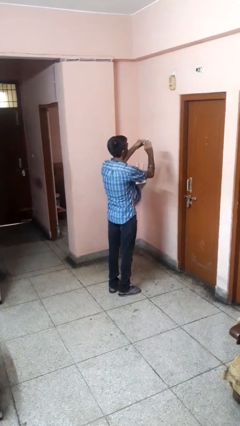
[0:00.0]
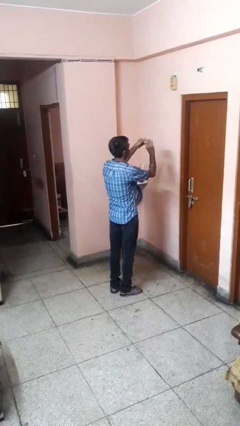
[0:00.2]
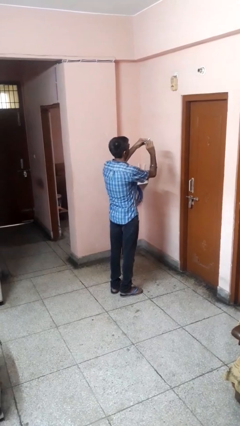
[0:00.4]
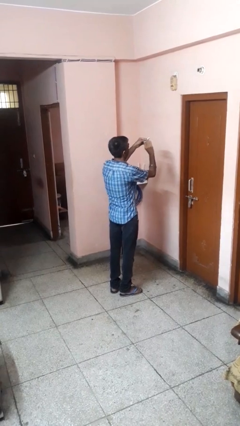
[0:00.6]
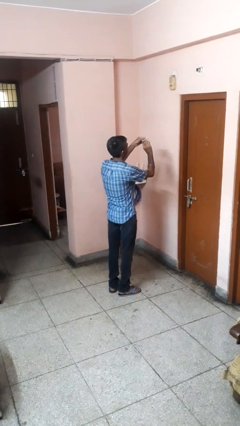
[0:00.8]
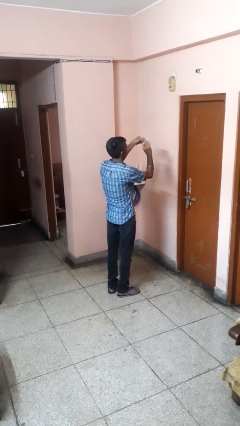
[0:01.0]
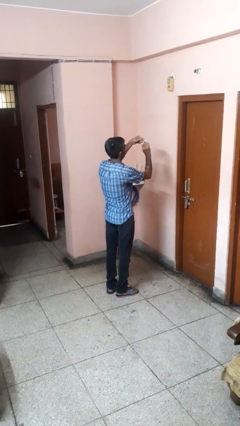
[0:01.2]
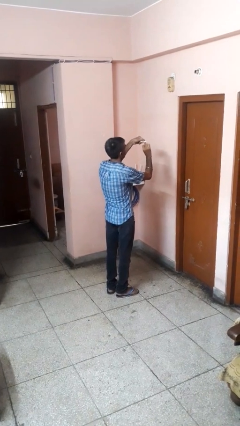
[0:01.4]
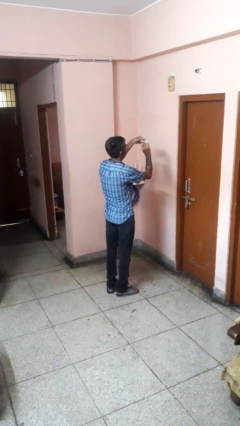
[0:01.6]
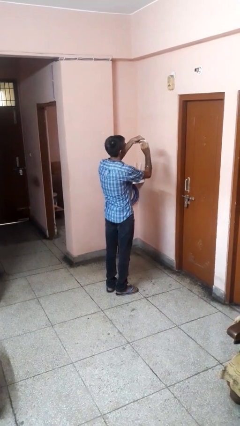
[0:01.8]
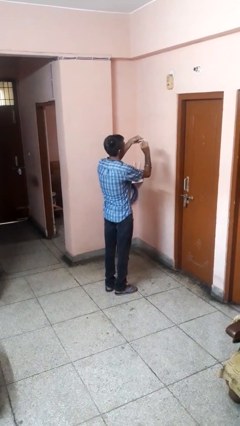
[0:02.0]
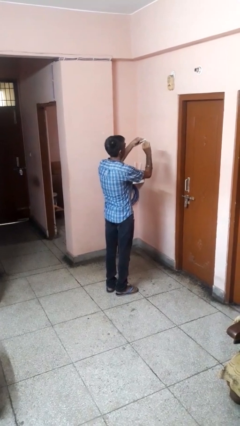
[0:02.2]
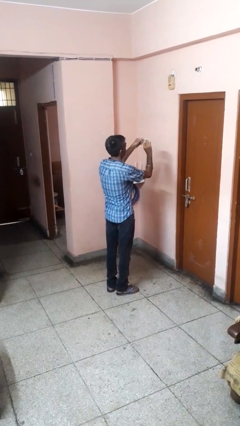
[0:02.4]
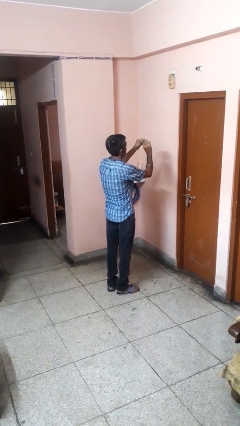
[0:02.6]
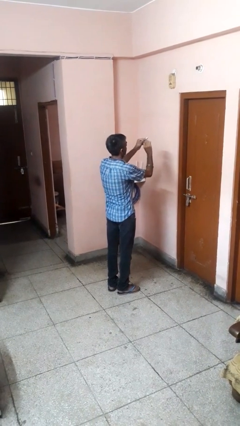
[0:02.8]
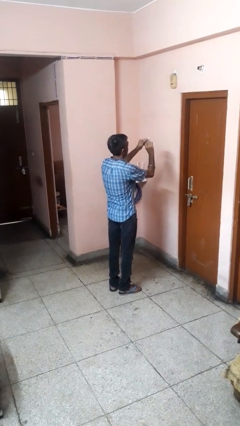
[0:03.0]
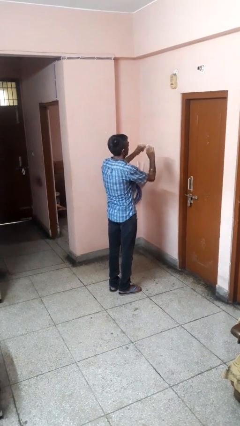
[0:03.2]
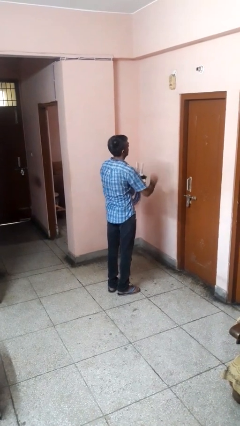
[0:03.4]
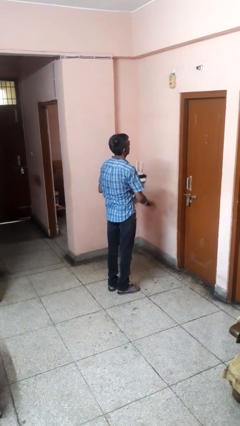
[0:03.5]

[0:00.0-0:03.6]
person files fingernails

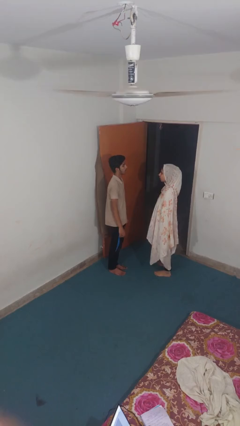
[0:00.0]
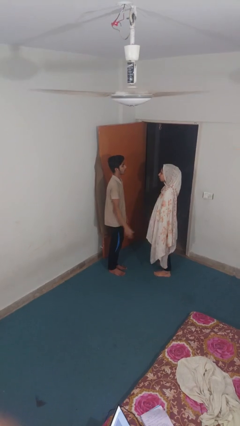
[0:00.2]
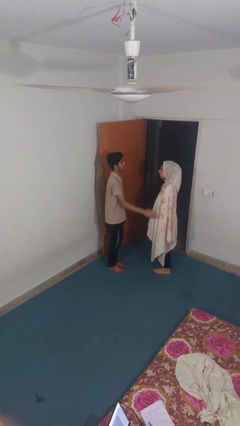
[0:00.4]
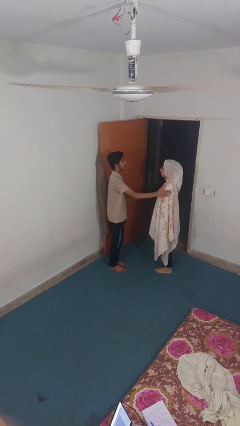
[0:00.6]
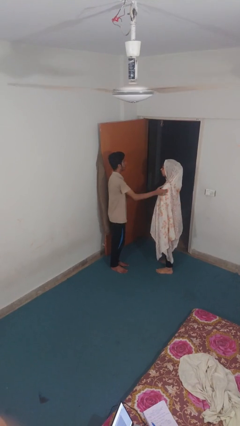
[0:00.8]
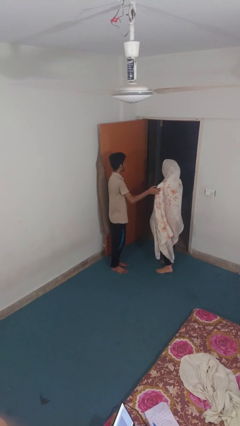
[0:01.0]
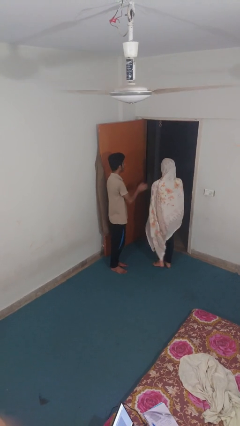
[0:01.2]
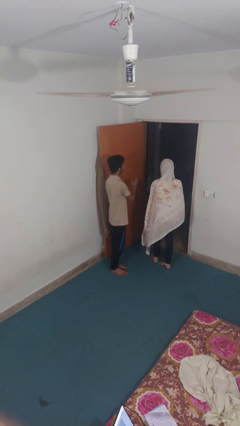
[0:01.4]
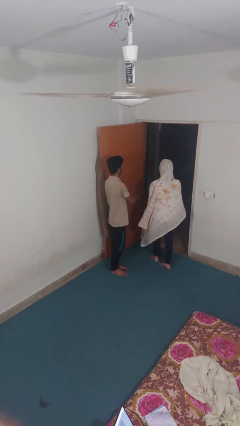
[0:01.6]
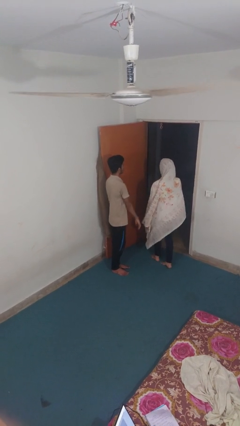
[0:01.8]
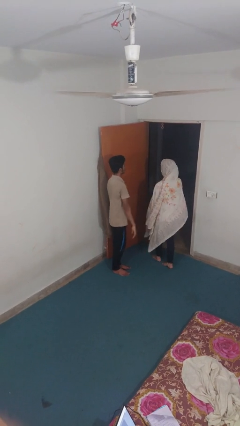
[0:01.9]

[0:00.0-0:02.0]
person shoves person

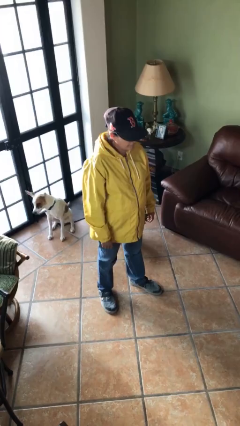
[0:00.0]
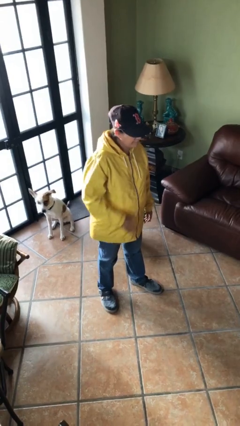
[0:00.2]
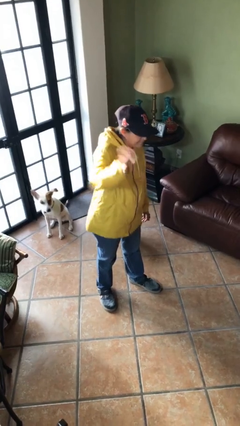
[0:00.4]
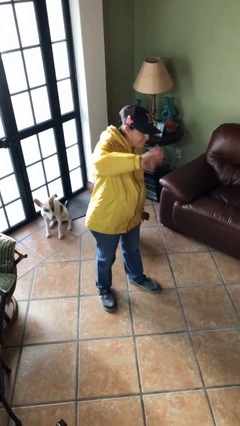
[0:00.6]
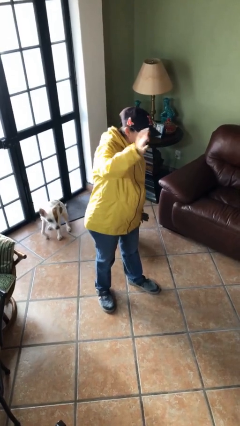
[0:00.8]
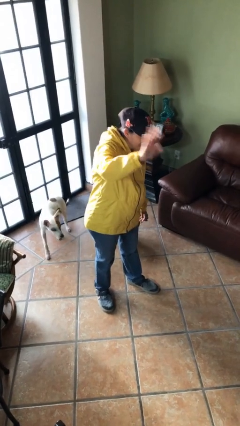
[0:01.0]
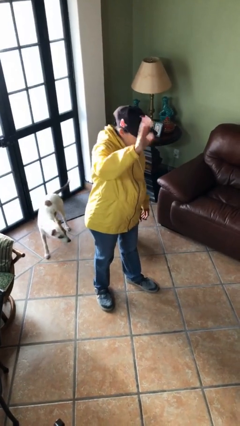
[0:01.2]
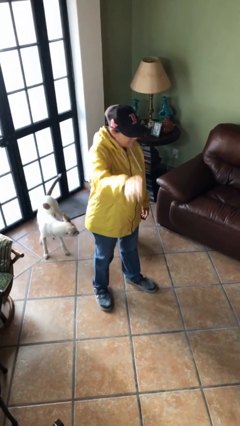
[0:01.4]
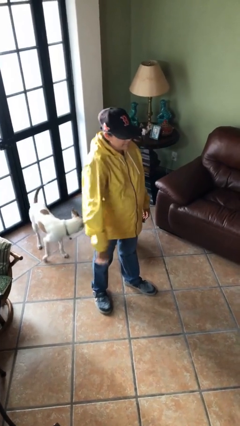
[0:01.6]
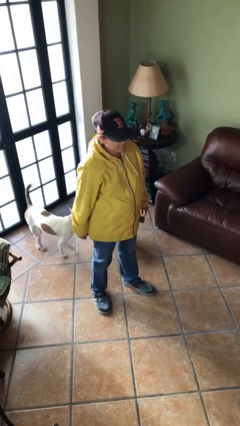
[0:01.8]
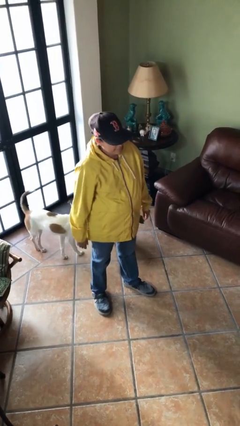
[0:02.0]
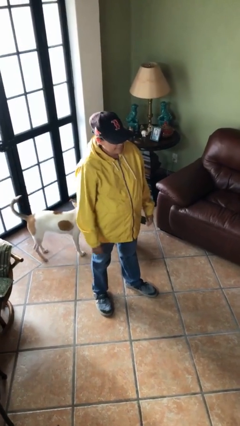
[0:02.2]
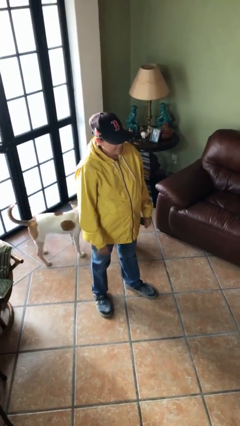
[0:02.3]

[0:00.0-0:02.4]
person waves at person

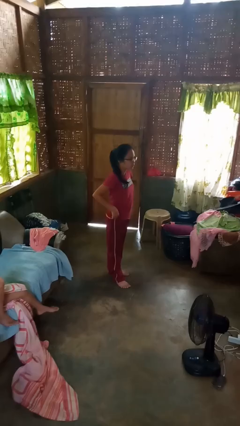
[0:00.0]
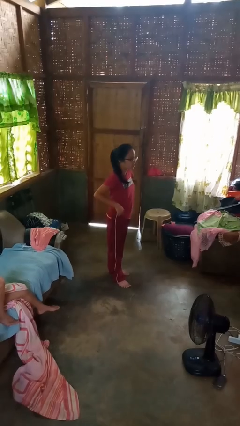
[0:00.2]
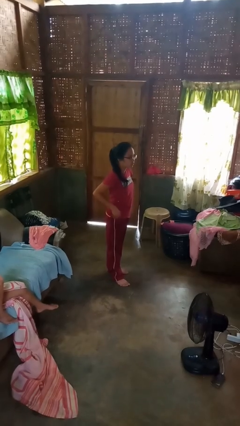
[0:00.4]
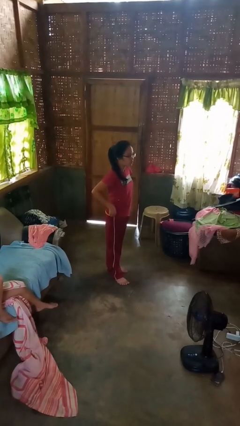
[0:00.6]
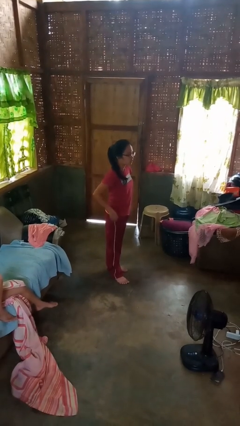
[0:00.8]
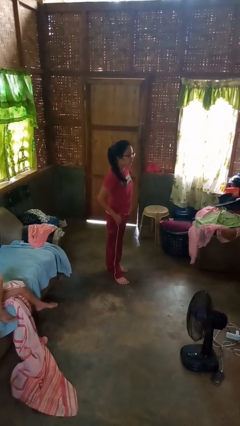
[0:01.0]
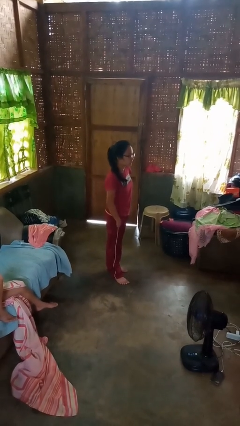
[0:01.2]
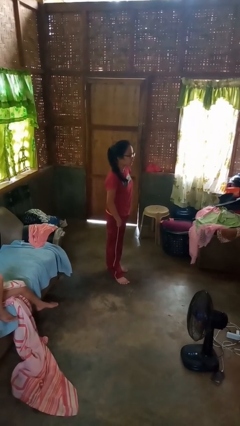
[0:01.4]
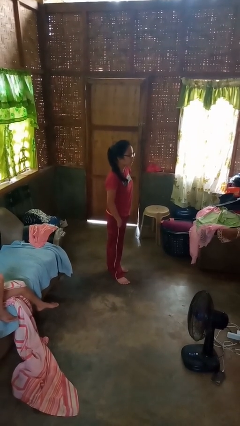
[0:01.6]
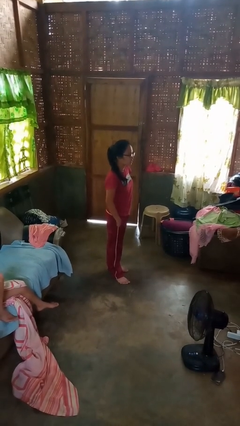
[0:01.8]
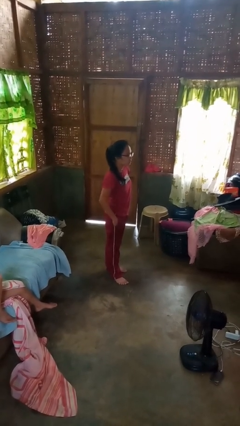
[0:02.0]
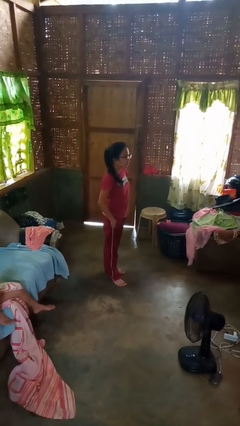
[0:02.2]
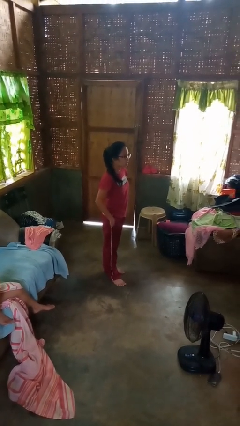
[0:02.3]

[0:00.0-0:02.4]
person puts hands in back pockets

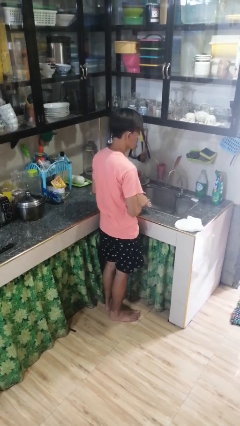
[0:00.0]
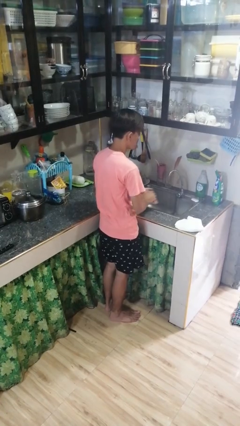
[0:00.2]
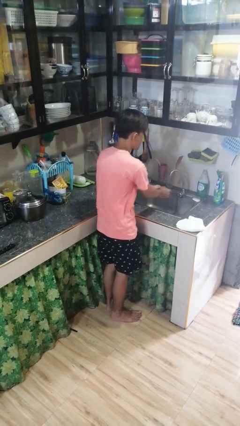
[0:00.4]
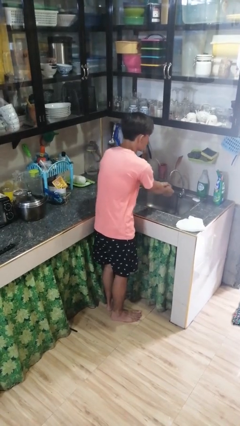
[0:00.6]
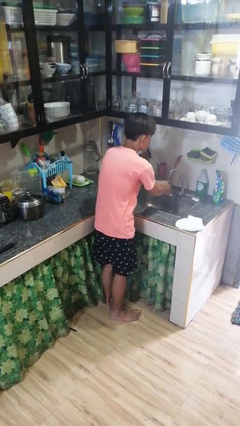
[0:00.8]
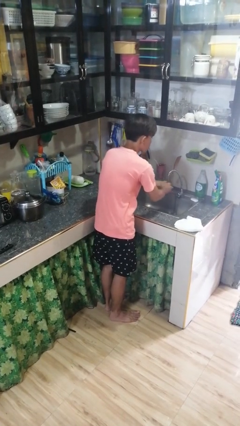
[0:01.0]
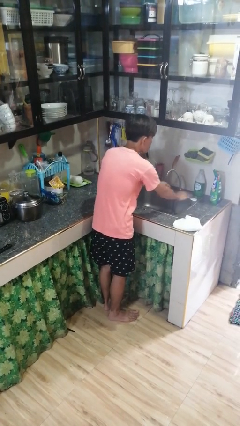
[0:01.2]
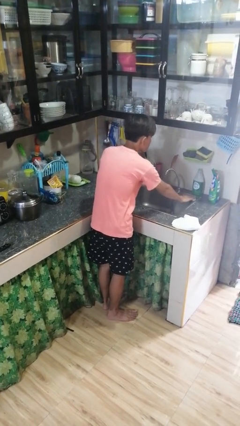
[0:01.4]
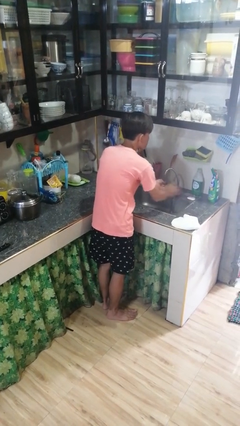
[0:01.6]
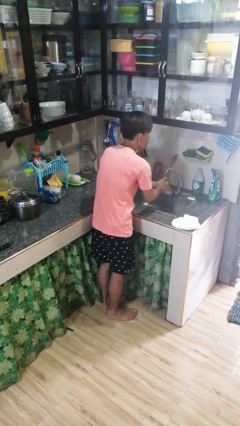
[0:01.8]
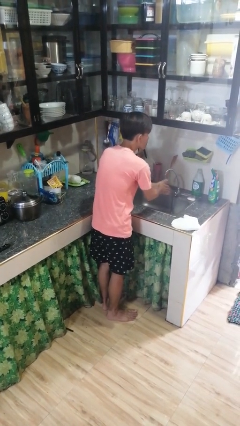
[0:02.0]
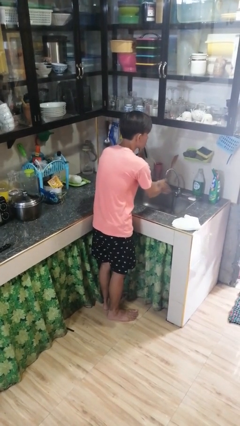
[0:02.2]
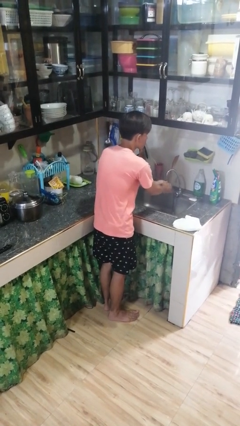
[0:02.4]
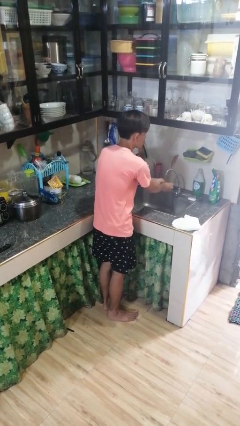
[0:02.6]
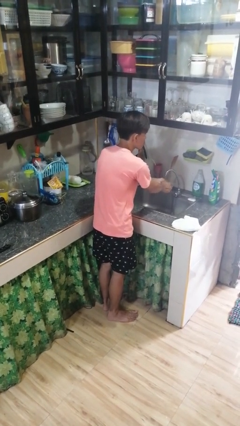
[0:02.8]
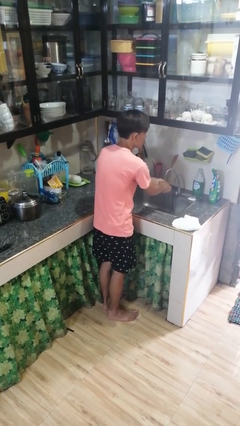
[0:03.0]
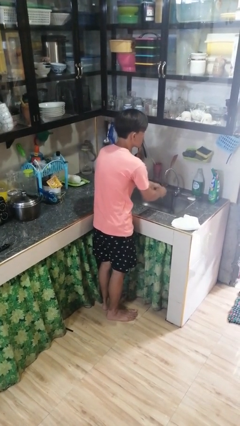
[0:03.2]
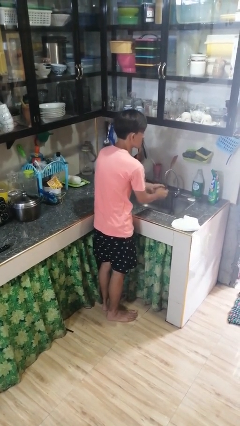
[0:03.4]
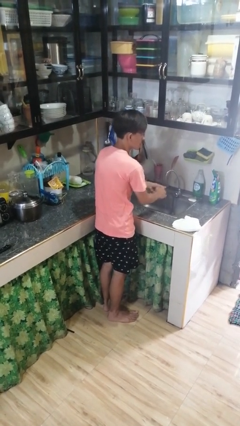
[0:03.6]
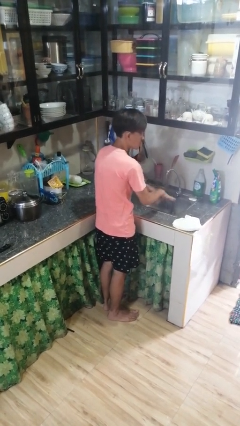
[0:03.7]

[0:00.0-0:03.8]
person washes hands

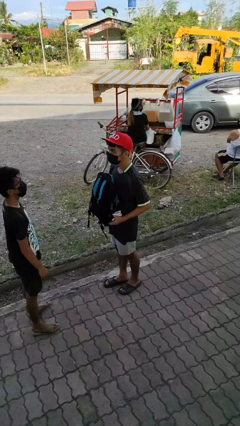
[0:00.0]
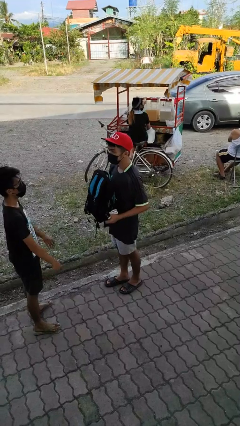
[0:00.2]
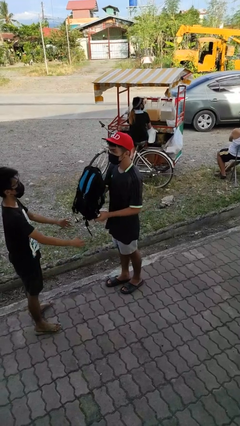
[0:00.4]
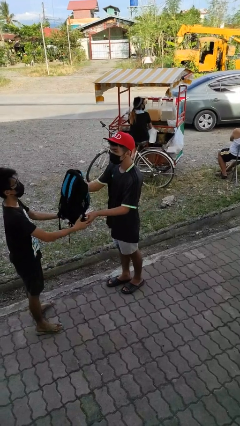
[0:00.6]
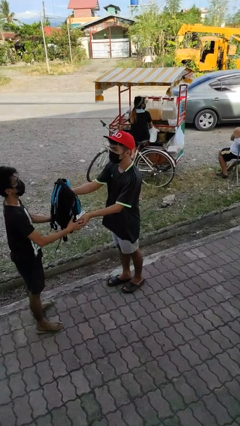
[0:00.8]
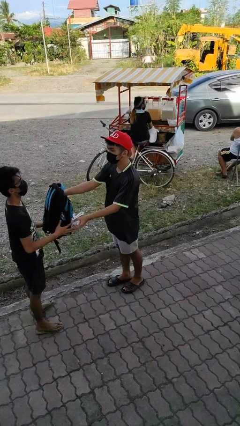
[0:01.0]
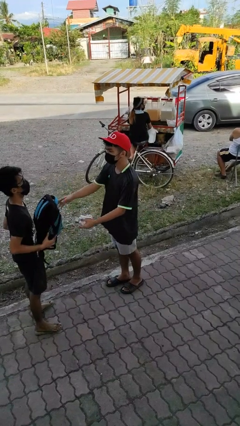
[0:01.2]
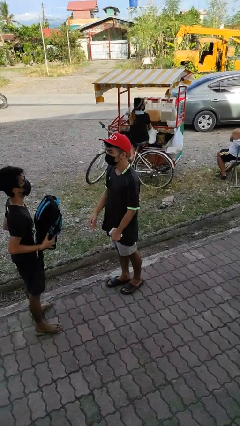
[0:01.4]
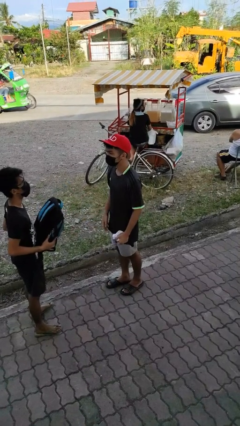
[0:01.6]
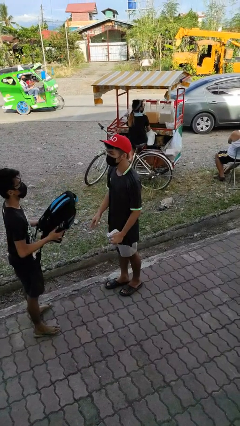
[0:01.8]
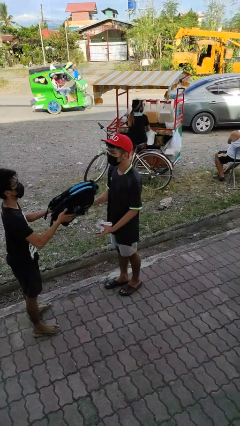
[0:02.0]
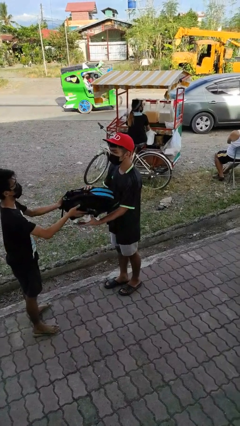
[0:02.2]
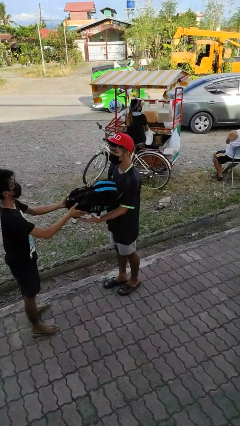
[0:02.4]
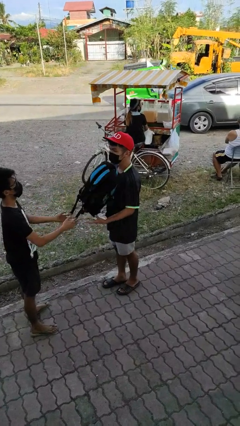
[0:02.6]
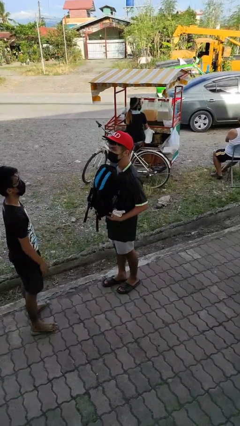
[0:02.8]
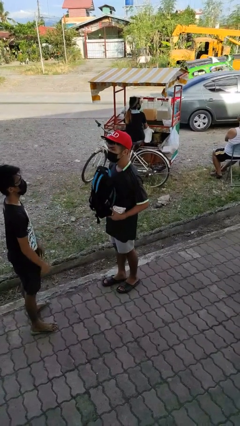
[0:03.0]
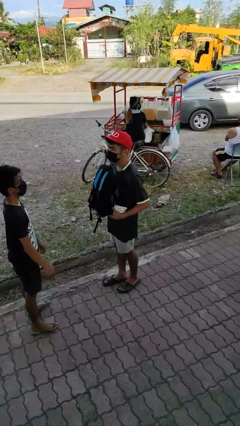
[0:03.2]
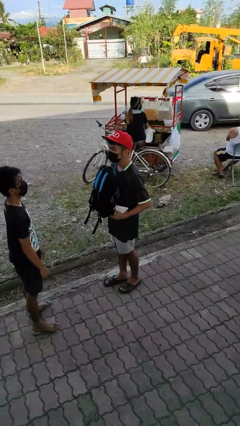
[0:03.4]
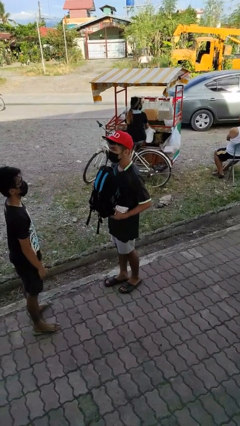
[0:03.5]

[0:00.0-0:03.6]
person transfers object to person
